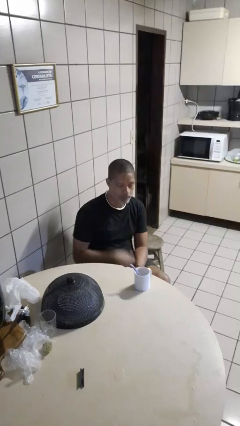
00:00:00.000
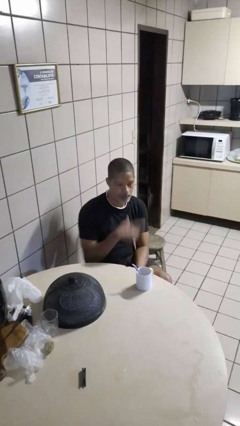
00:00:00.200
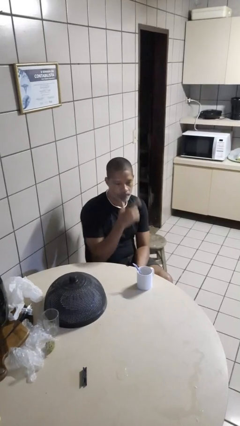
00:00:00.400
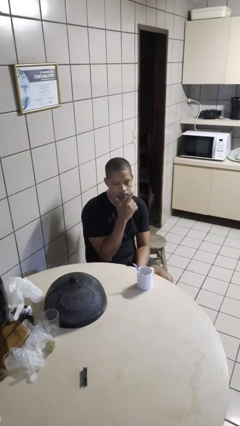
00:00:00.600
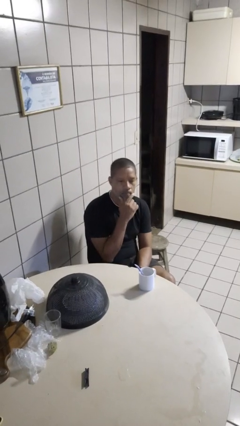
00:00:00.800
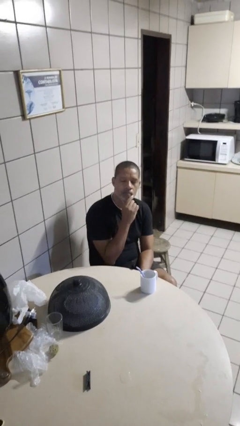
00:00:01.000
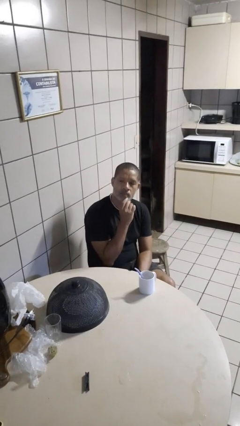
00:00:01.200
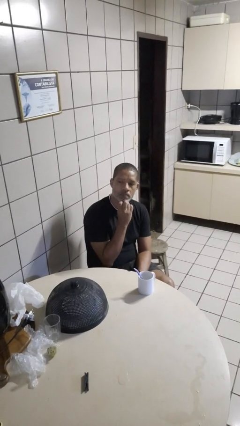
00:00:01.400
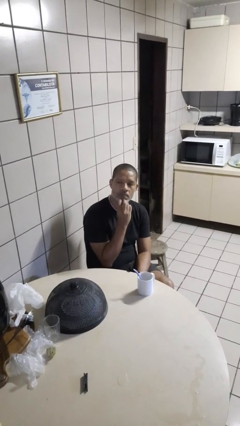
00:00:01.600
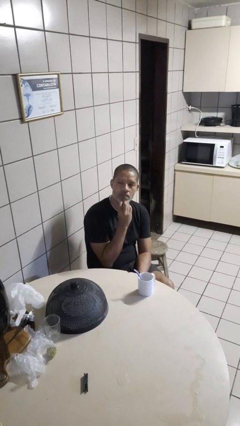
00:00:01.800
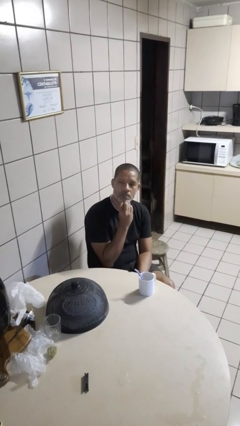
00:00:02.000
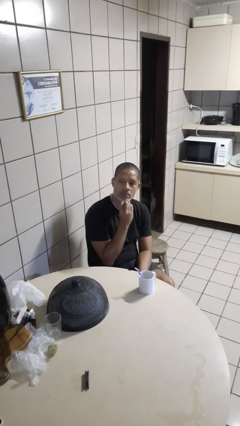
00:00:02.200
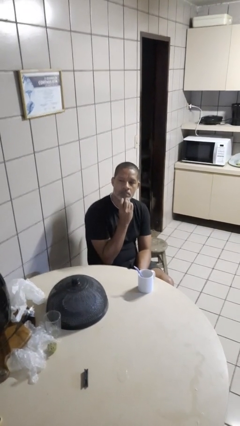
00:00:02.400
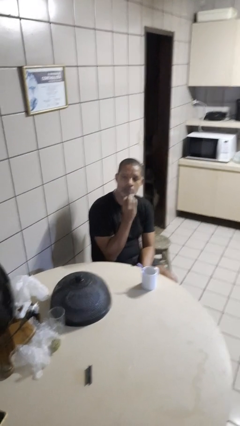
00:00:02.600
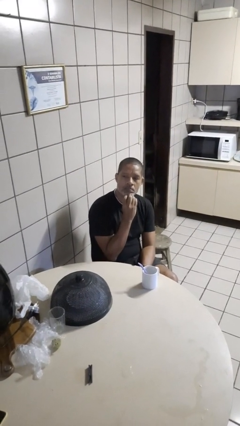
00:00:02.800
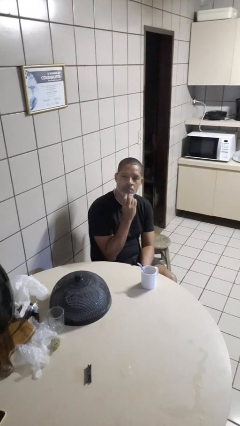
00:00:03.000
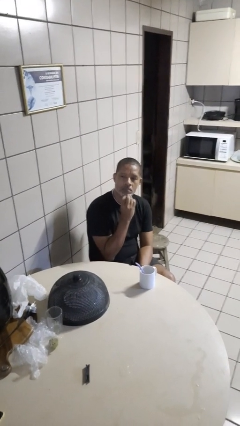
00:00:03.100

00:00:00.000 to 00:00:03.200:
person strokes chin

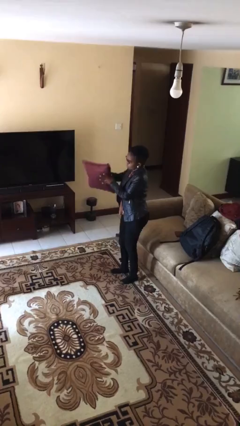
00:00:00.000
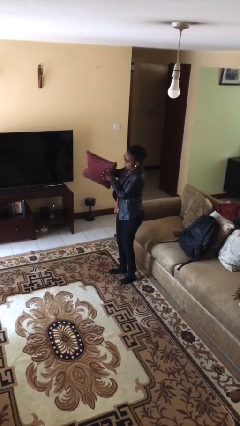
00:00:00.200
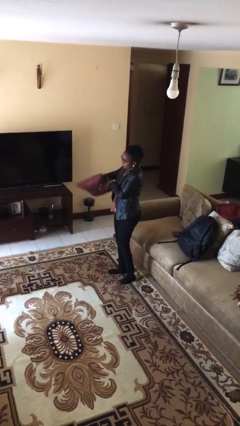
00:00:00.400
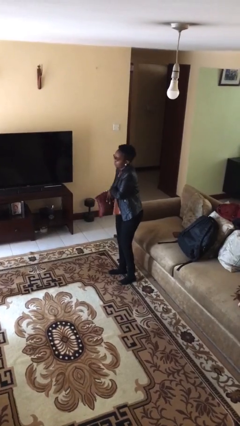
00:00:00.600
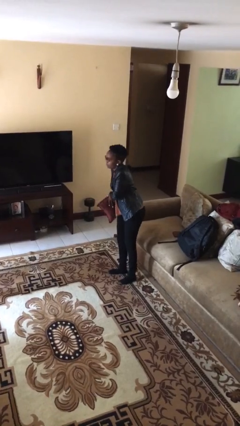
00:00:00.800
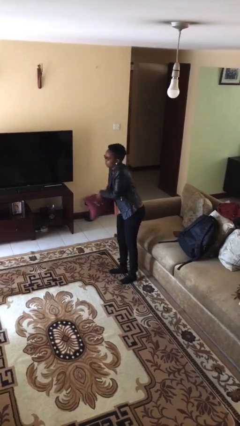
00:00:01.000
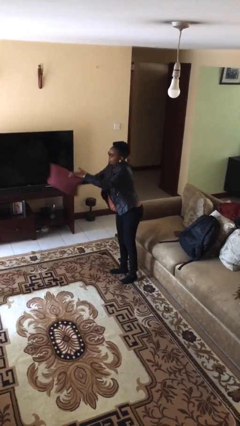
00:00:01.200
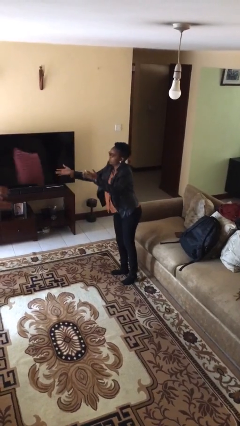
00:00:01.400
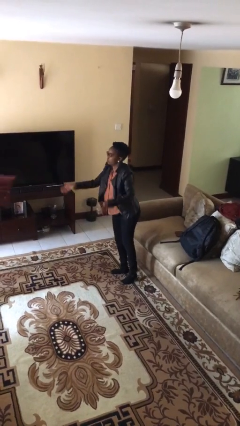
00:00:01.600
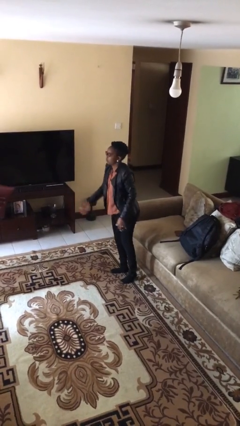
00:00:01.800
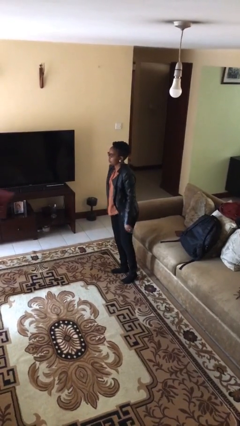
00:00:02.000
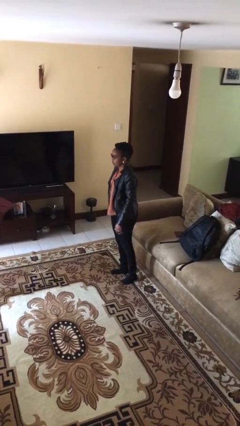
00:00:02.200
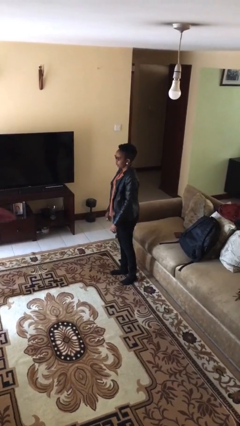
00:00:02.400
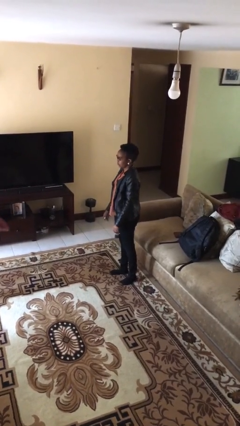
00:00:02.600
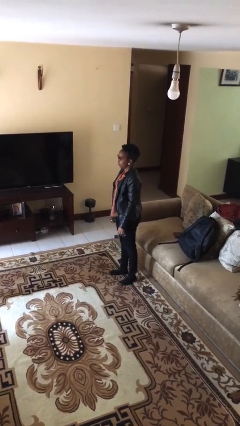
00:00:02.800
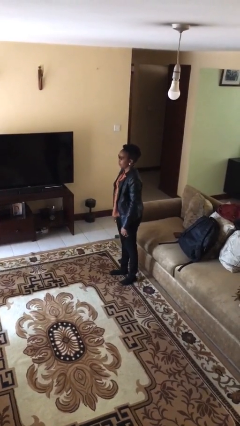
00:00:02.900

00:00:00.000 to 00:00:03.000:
person throws object to person

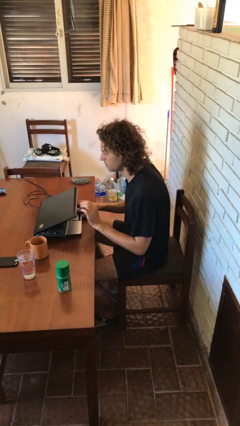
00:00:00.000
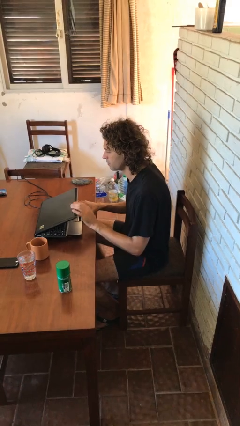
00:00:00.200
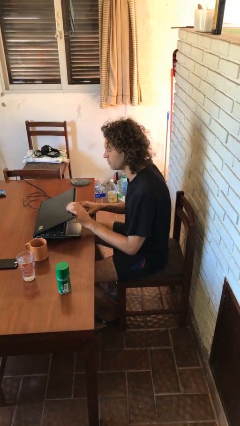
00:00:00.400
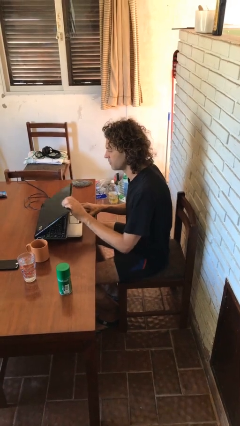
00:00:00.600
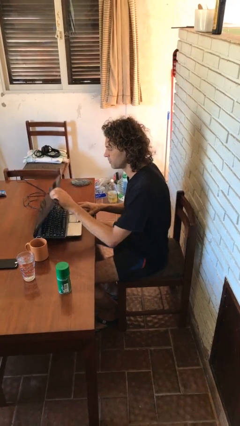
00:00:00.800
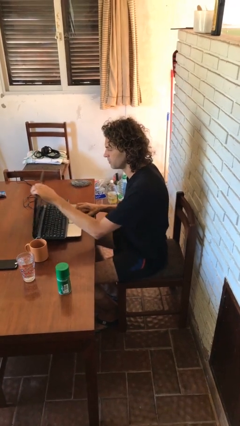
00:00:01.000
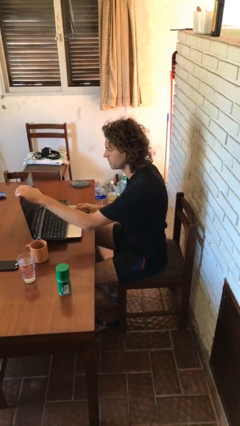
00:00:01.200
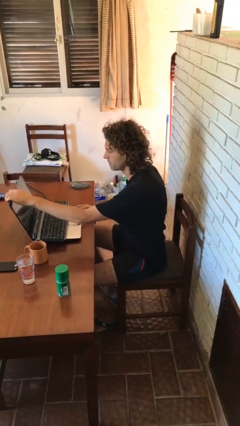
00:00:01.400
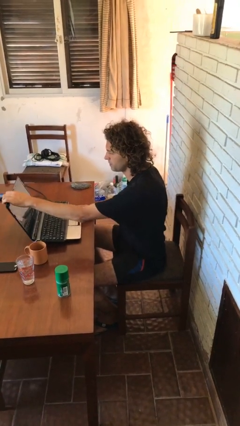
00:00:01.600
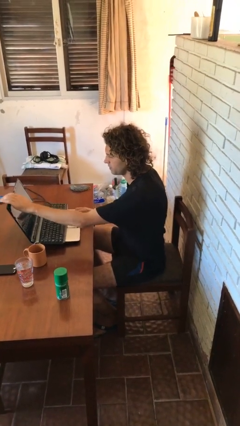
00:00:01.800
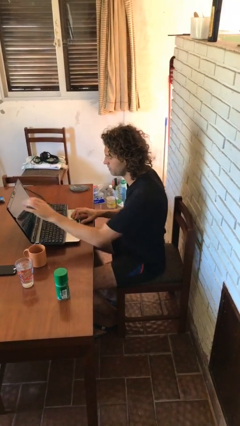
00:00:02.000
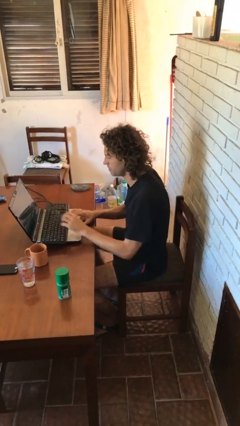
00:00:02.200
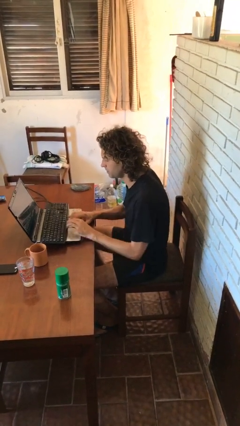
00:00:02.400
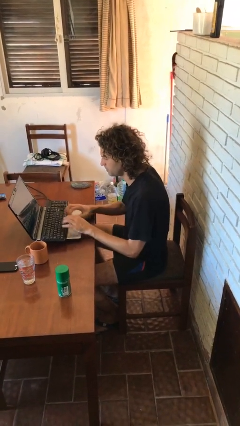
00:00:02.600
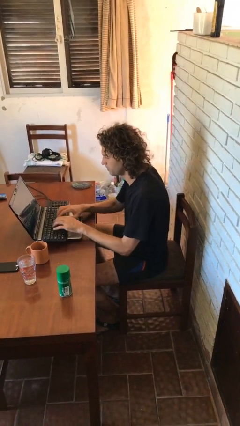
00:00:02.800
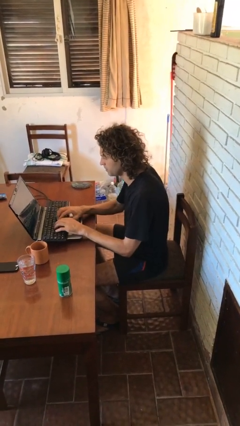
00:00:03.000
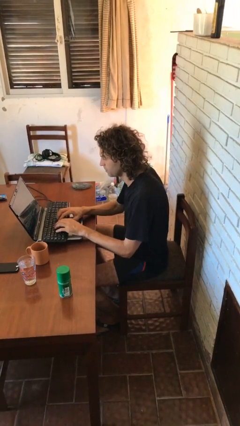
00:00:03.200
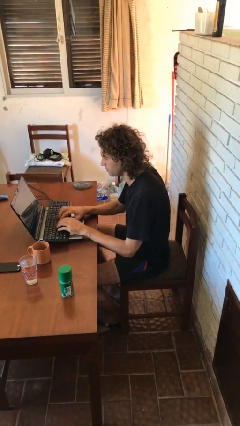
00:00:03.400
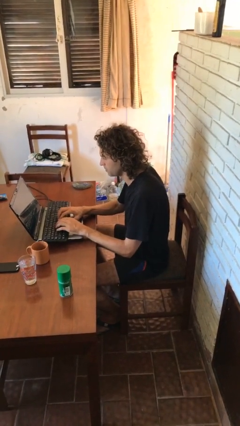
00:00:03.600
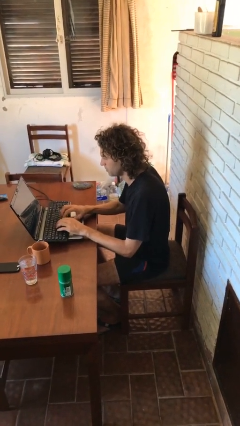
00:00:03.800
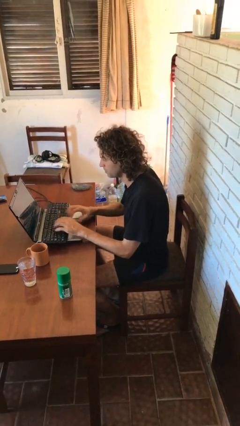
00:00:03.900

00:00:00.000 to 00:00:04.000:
person interacts with laptop

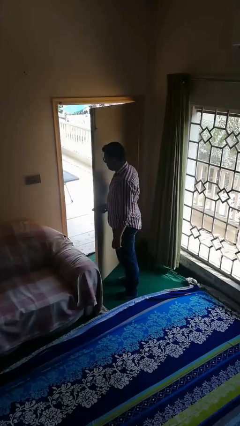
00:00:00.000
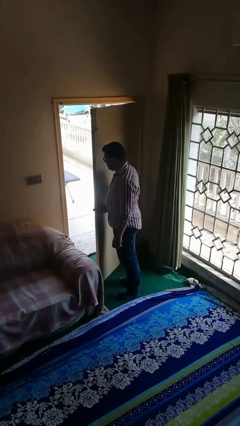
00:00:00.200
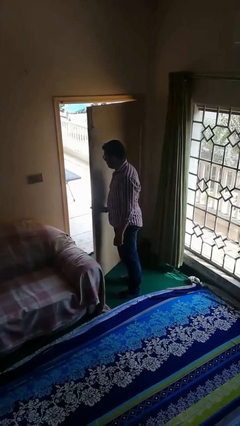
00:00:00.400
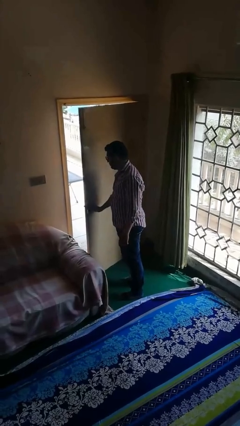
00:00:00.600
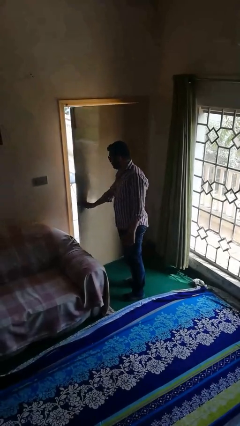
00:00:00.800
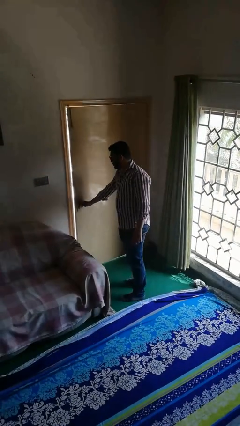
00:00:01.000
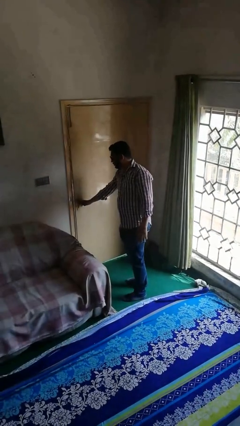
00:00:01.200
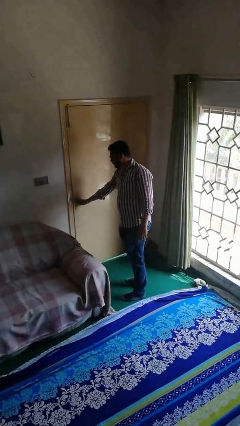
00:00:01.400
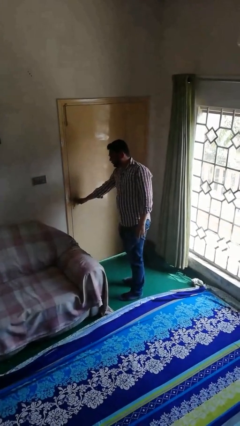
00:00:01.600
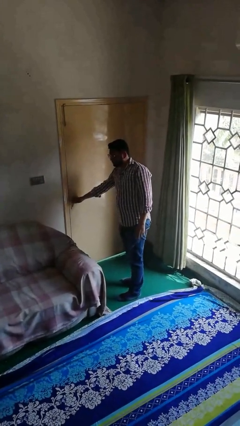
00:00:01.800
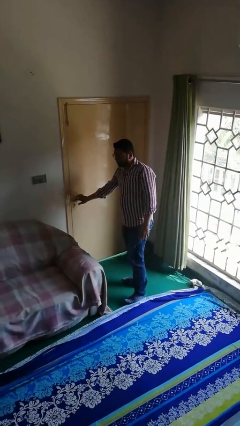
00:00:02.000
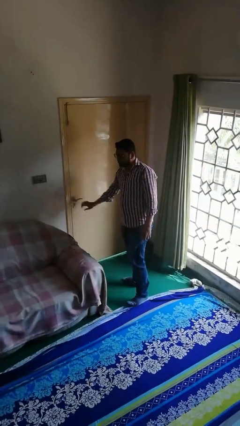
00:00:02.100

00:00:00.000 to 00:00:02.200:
person closes facility door

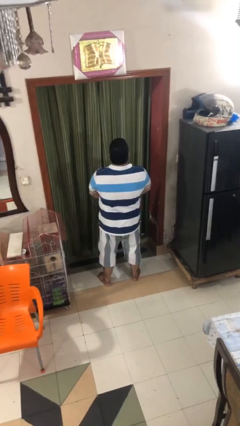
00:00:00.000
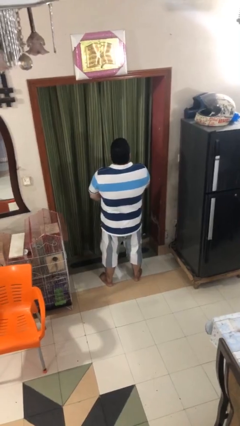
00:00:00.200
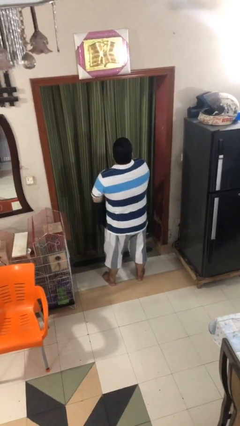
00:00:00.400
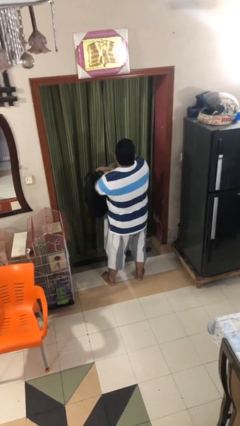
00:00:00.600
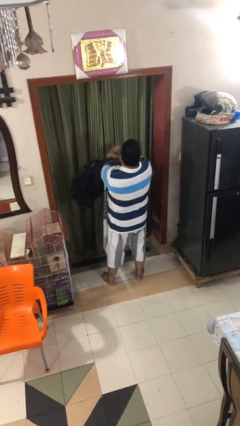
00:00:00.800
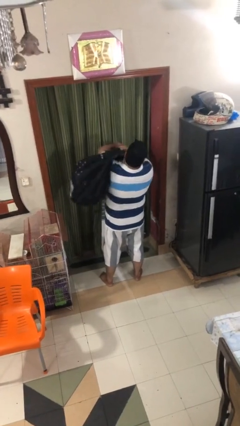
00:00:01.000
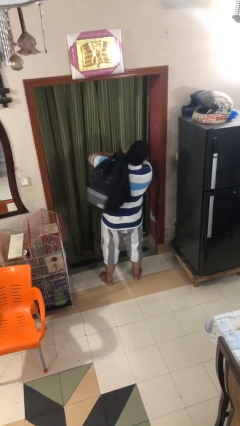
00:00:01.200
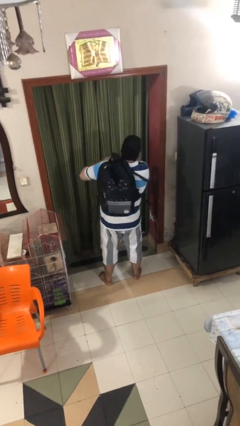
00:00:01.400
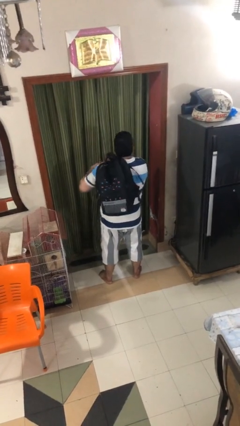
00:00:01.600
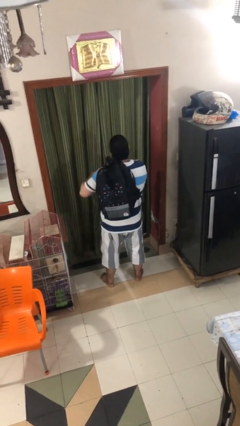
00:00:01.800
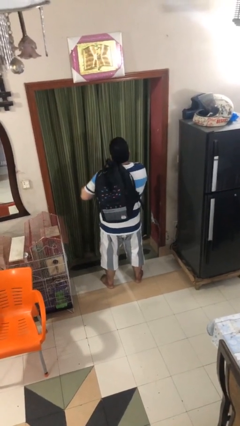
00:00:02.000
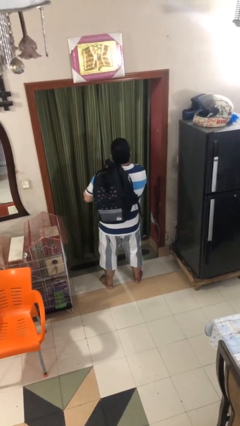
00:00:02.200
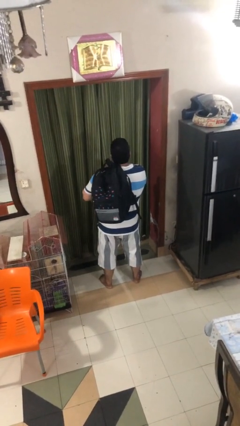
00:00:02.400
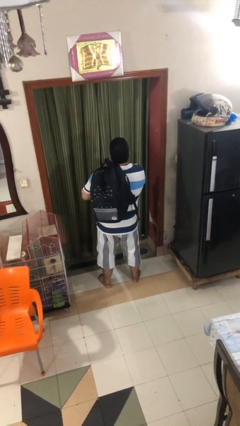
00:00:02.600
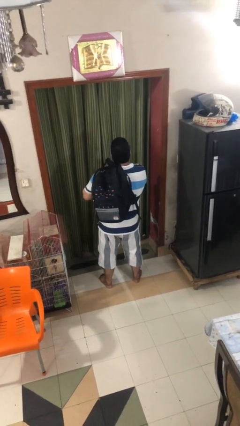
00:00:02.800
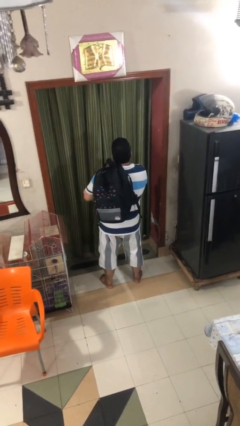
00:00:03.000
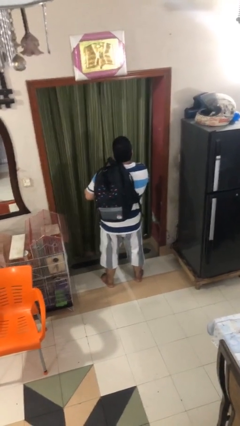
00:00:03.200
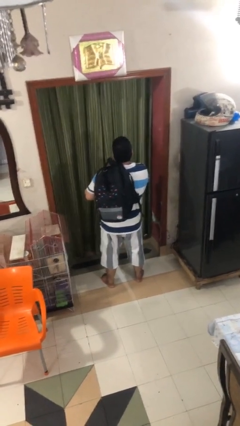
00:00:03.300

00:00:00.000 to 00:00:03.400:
person puts on backpack

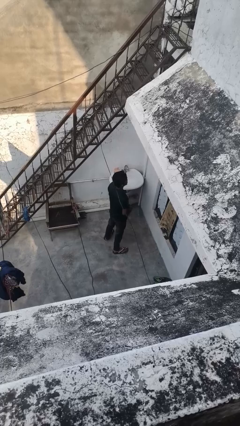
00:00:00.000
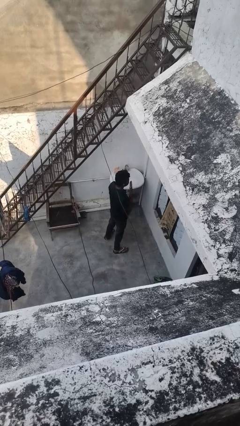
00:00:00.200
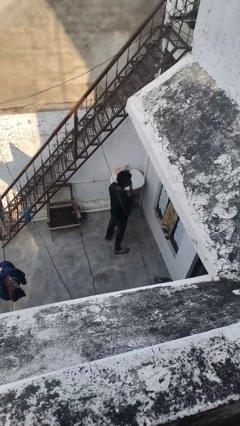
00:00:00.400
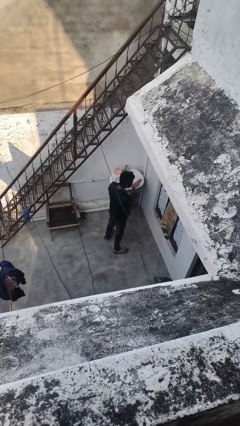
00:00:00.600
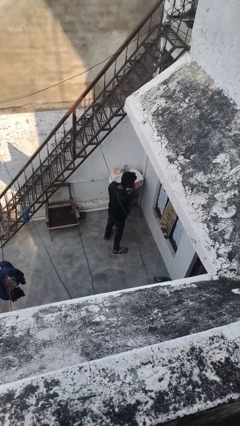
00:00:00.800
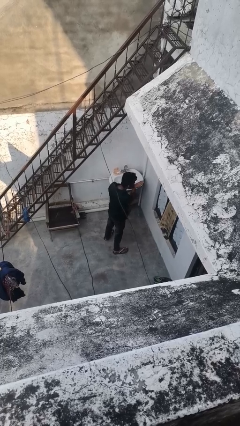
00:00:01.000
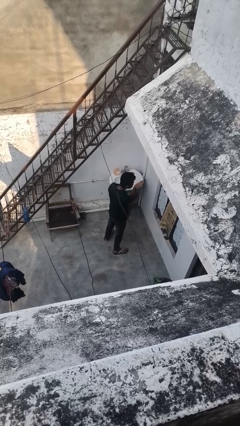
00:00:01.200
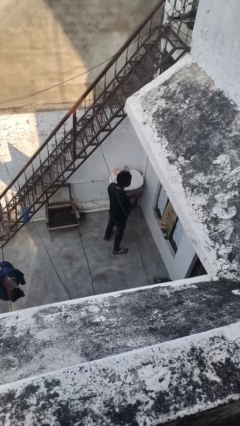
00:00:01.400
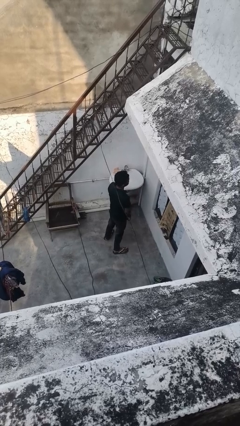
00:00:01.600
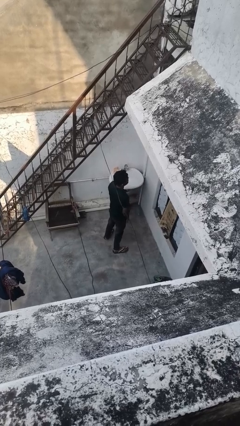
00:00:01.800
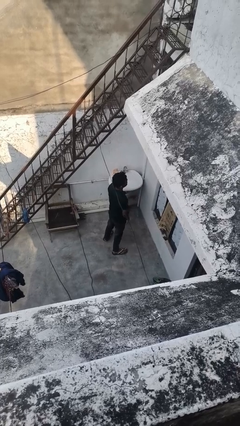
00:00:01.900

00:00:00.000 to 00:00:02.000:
person gestures blow kiss
